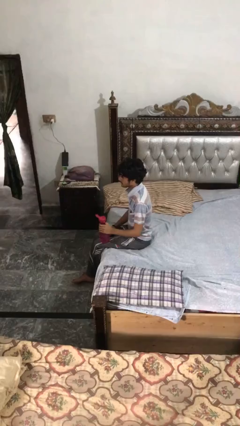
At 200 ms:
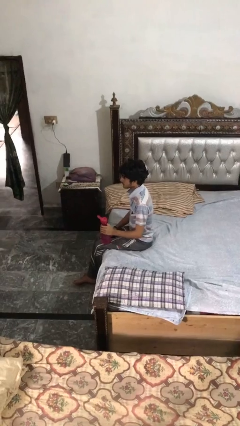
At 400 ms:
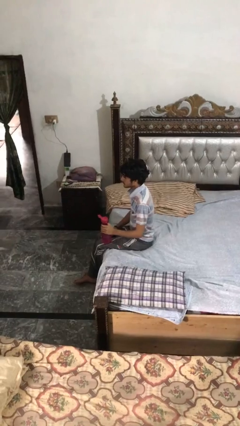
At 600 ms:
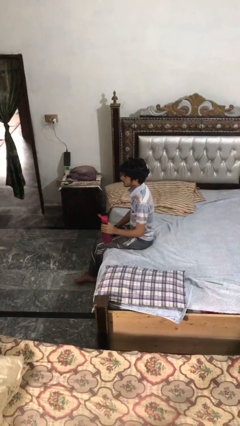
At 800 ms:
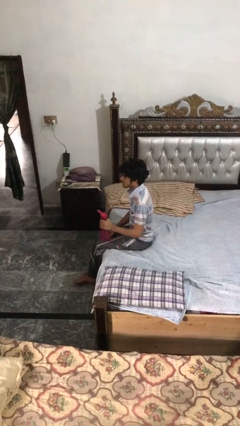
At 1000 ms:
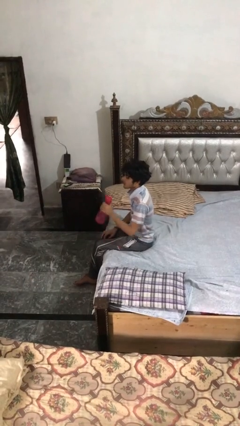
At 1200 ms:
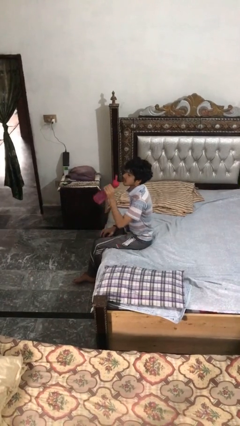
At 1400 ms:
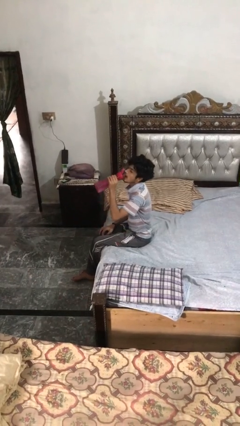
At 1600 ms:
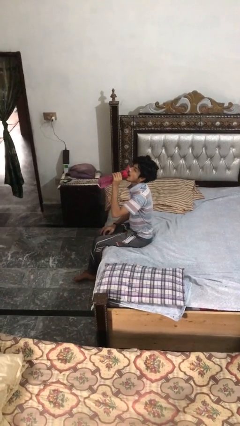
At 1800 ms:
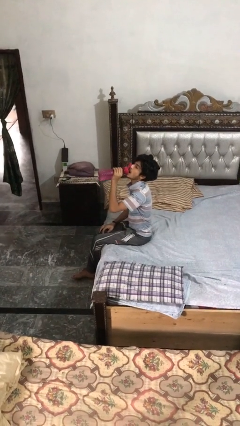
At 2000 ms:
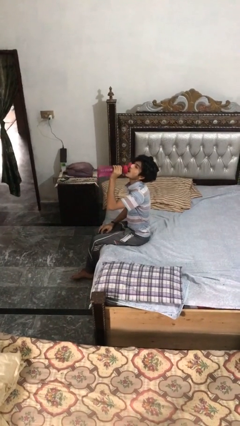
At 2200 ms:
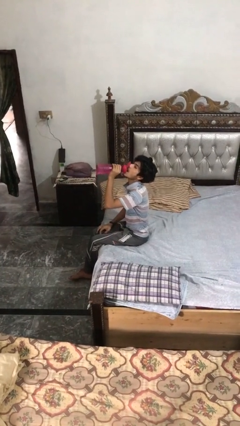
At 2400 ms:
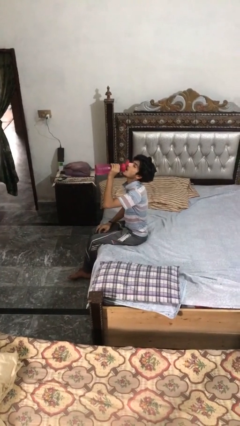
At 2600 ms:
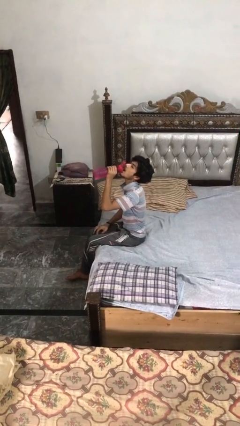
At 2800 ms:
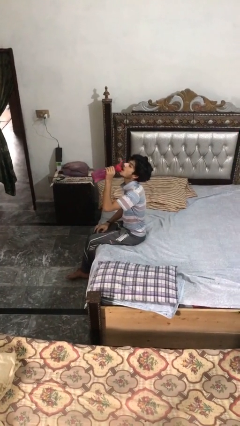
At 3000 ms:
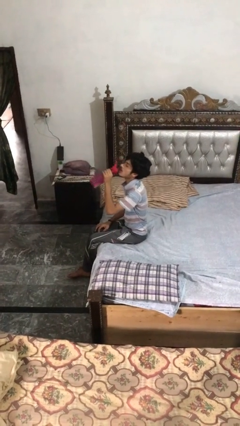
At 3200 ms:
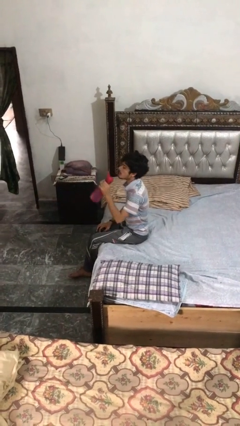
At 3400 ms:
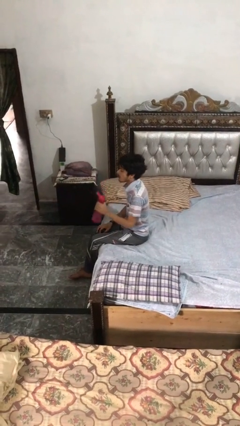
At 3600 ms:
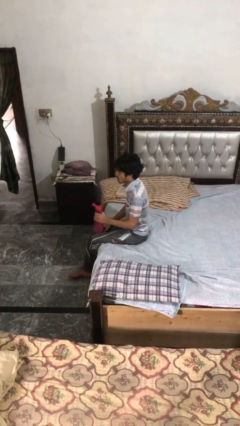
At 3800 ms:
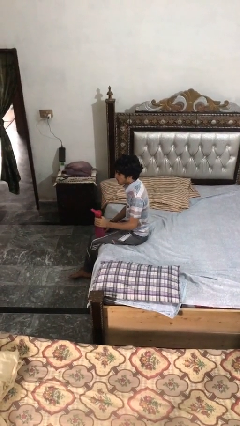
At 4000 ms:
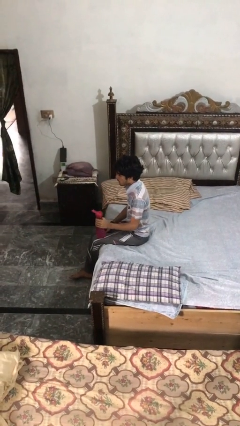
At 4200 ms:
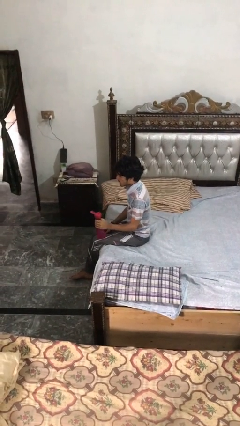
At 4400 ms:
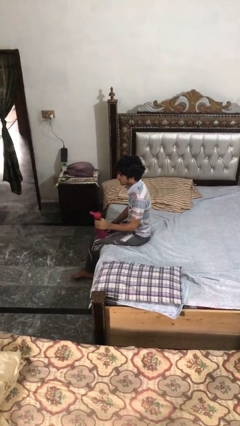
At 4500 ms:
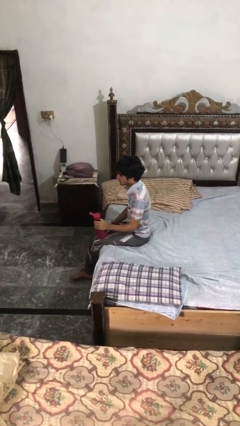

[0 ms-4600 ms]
person drinks from bottle

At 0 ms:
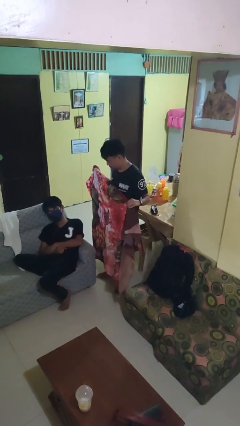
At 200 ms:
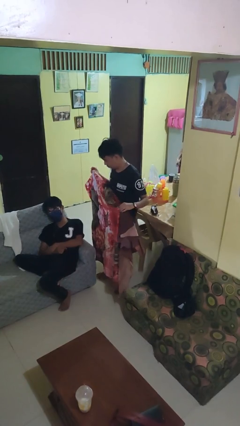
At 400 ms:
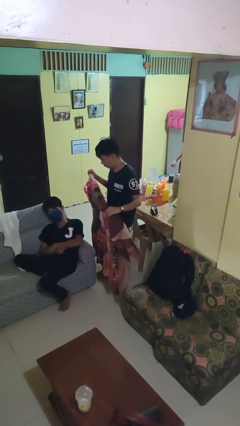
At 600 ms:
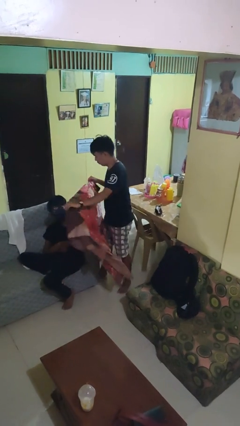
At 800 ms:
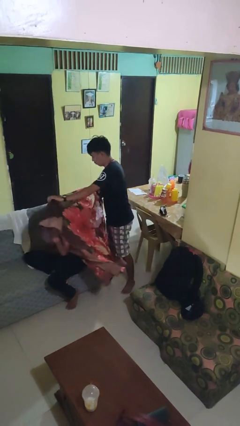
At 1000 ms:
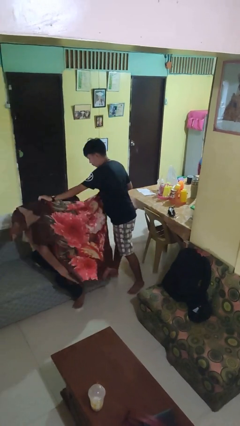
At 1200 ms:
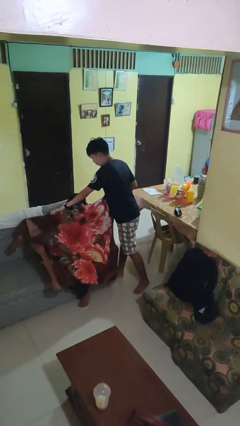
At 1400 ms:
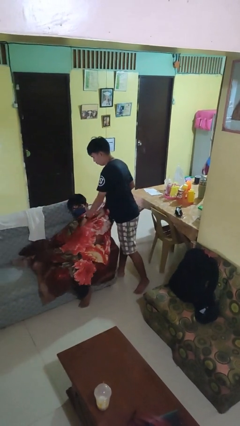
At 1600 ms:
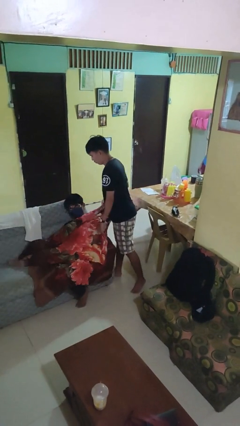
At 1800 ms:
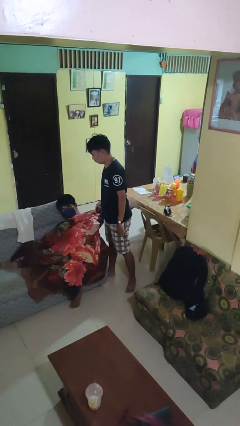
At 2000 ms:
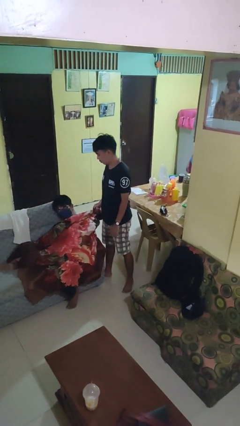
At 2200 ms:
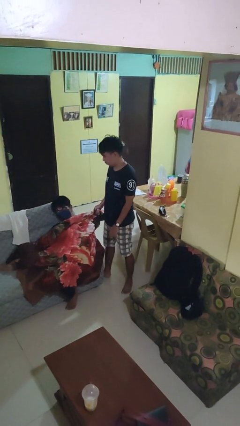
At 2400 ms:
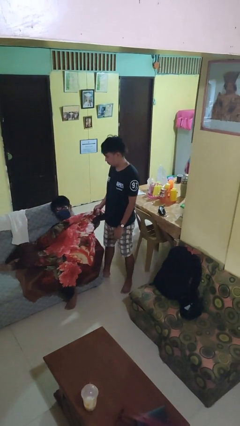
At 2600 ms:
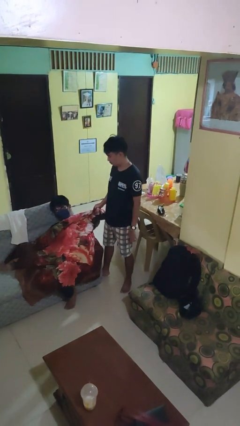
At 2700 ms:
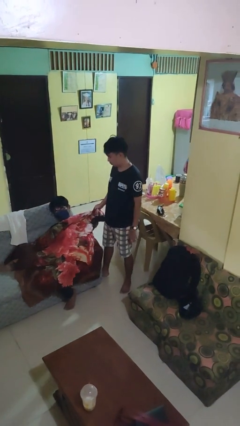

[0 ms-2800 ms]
person covers friend with blanket

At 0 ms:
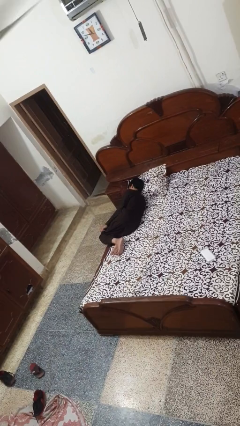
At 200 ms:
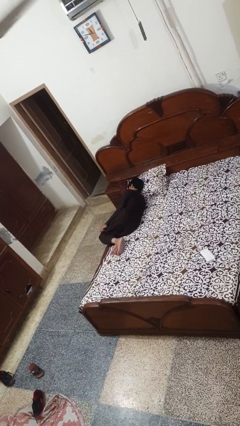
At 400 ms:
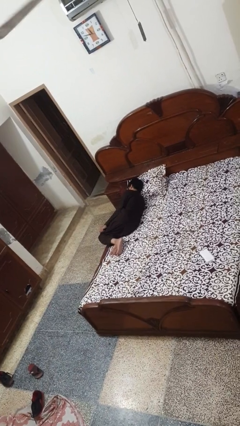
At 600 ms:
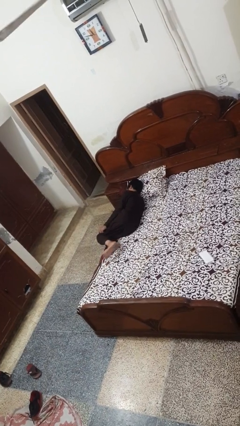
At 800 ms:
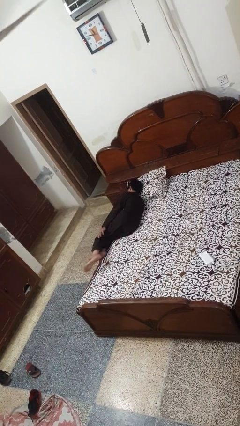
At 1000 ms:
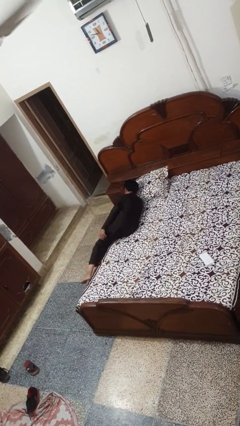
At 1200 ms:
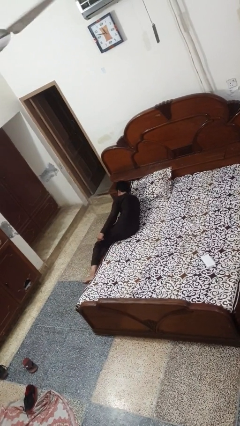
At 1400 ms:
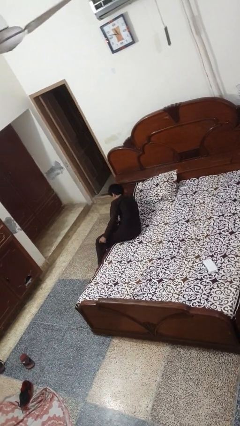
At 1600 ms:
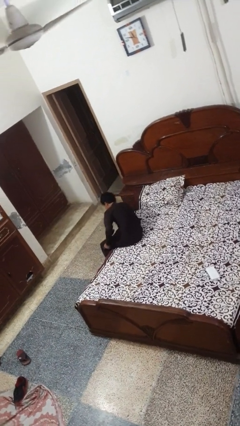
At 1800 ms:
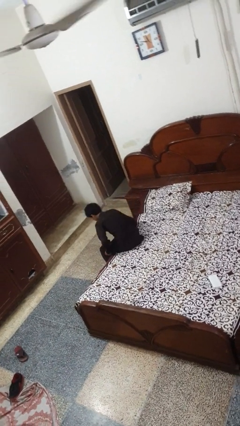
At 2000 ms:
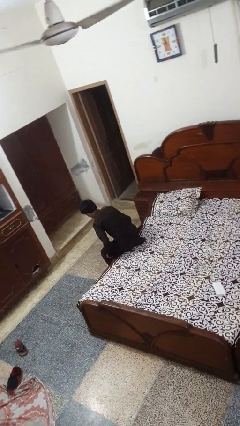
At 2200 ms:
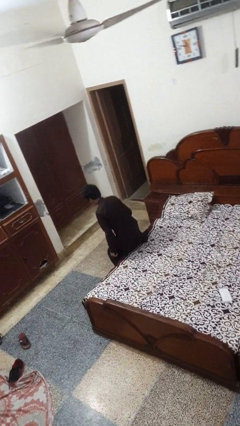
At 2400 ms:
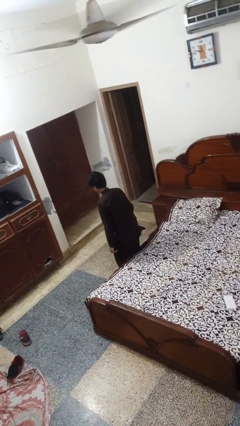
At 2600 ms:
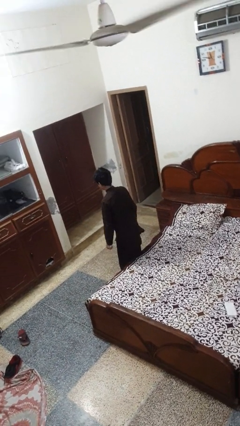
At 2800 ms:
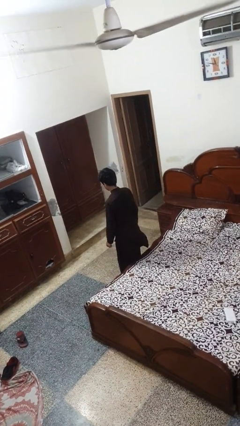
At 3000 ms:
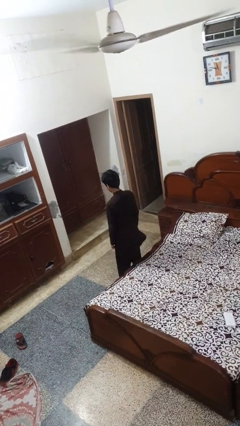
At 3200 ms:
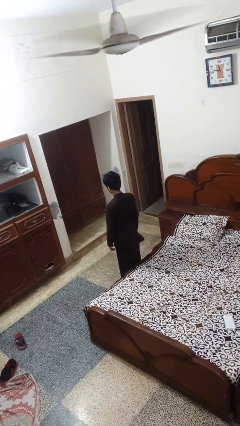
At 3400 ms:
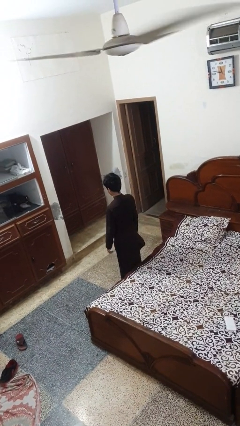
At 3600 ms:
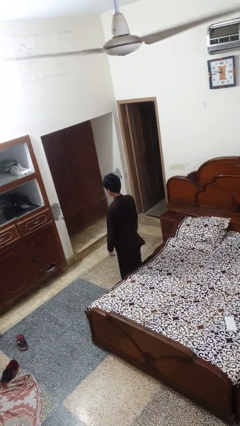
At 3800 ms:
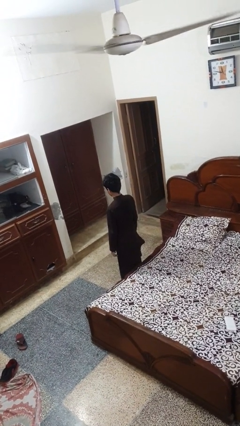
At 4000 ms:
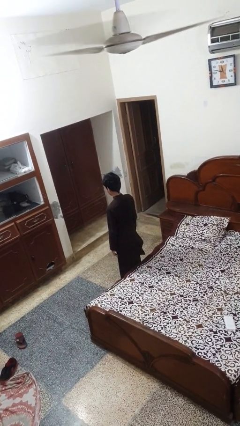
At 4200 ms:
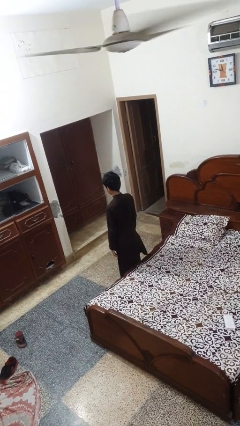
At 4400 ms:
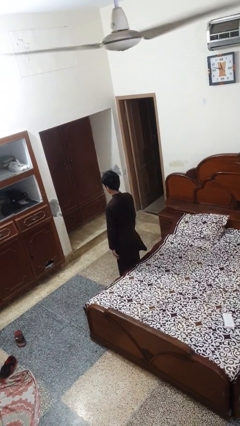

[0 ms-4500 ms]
person stands up

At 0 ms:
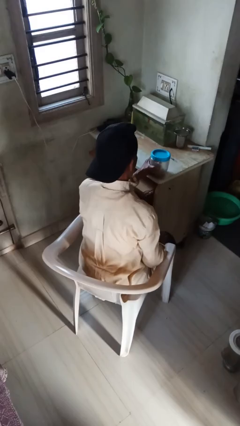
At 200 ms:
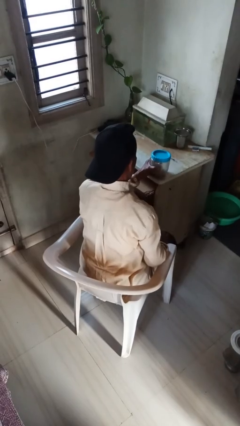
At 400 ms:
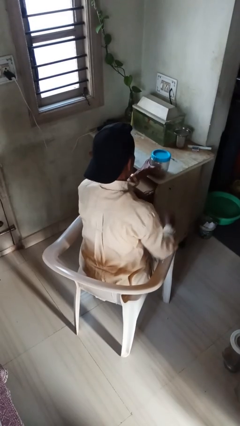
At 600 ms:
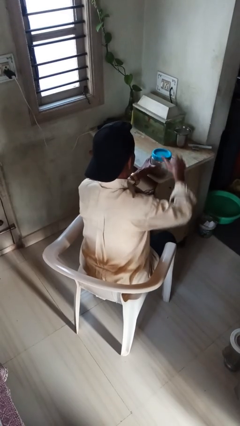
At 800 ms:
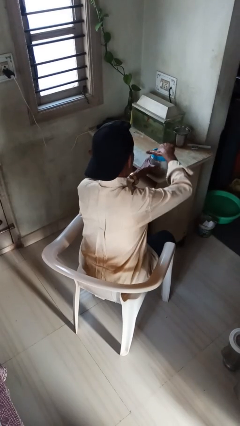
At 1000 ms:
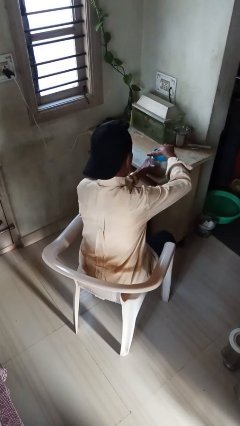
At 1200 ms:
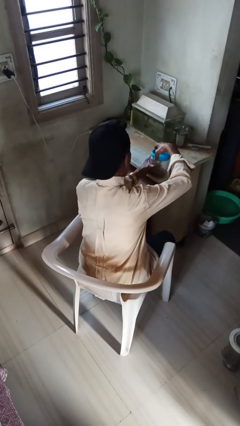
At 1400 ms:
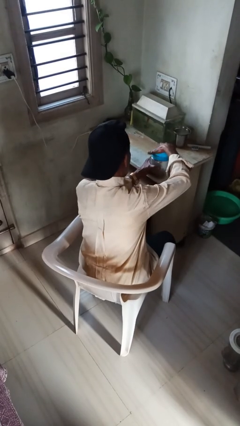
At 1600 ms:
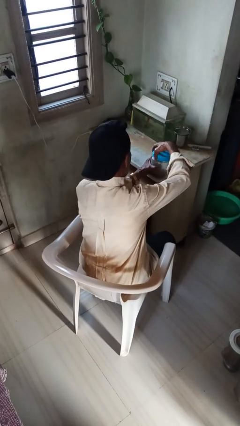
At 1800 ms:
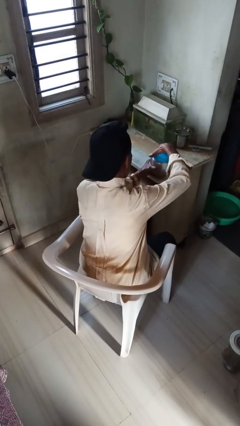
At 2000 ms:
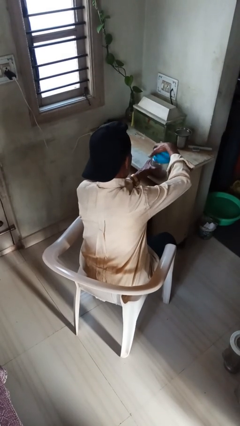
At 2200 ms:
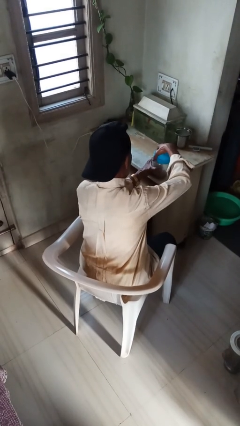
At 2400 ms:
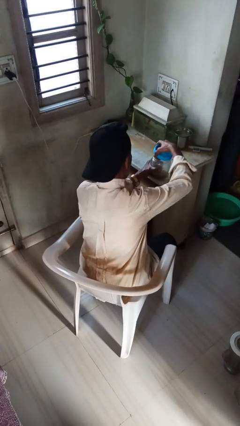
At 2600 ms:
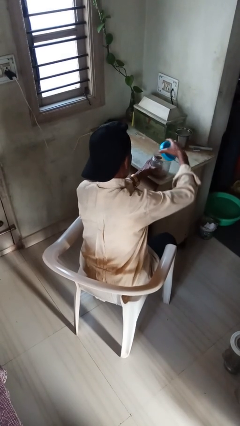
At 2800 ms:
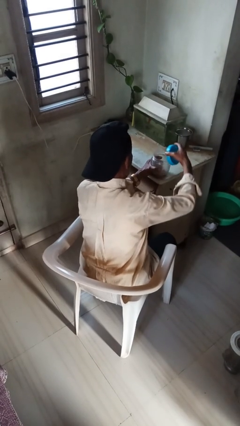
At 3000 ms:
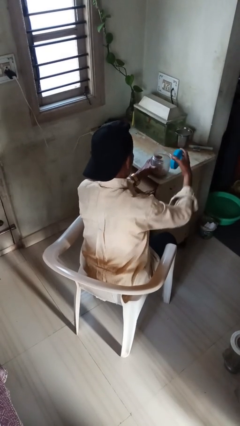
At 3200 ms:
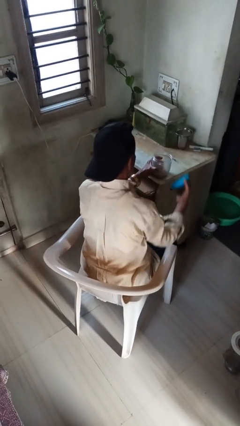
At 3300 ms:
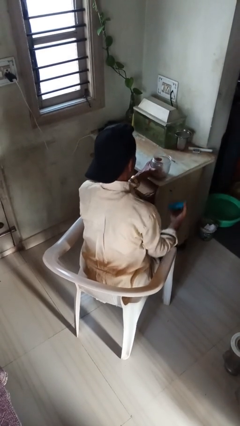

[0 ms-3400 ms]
person opens jar

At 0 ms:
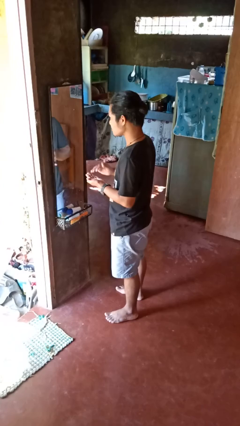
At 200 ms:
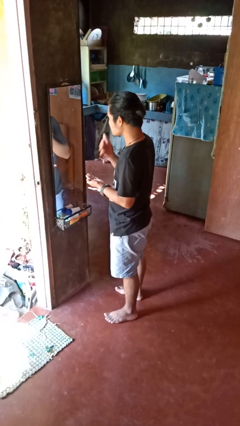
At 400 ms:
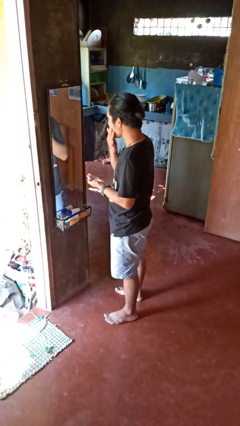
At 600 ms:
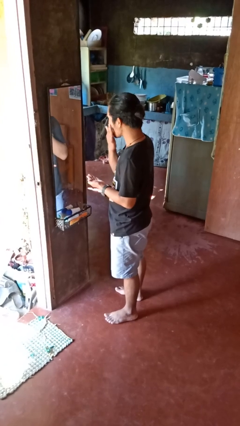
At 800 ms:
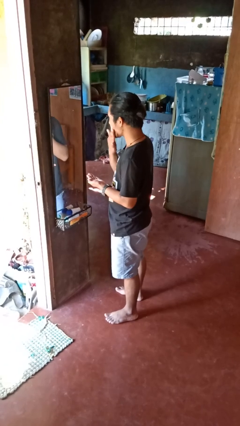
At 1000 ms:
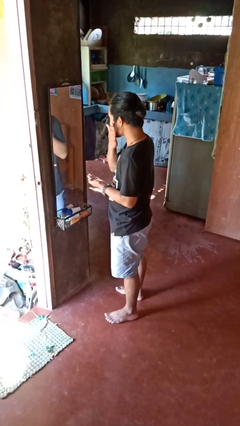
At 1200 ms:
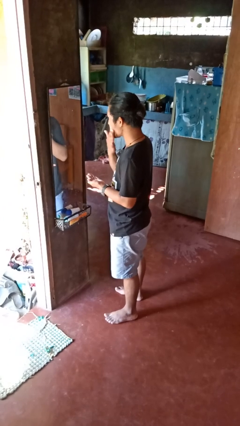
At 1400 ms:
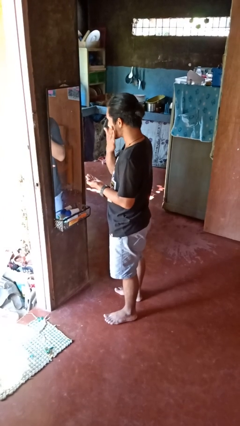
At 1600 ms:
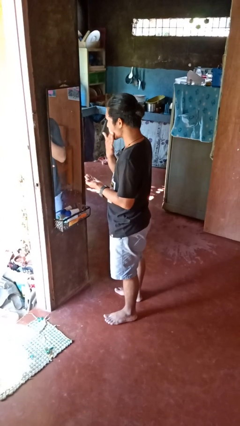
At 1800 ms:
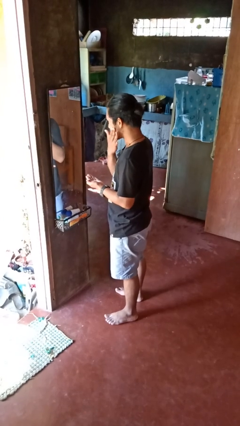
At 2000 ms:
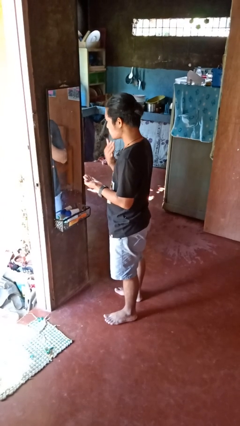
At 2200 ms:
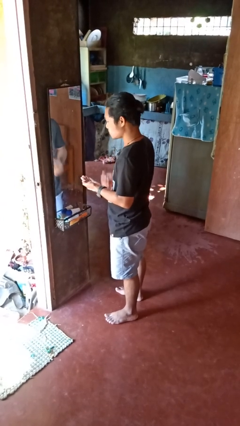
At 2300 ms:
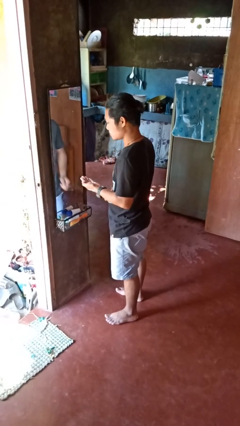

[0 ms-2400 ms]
person applies foundation makeup

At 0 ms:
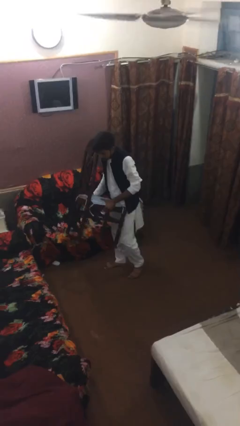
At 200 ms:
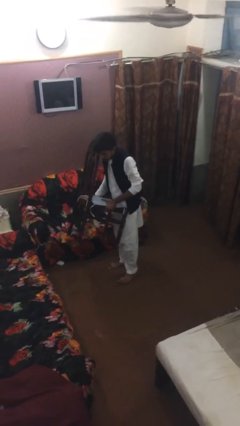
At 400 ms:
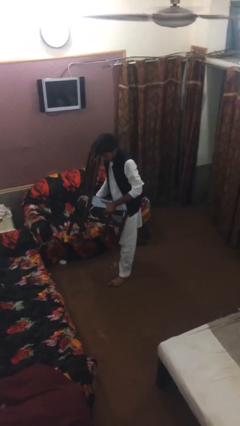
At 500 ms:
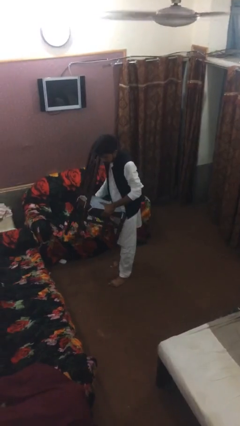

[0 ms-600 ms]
person puts down object on floor
